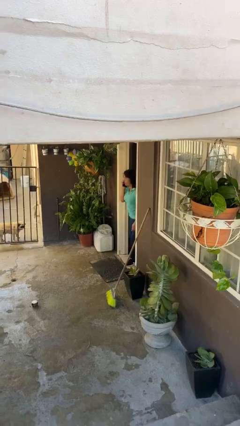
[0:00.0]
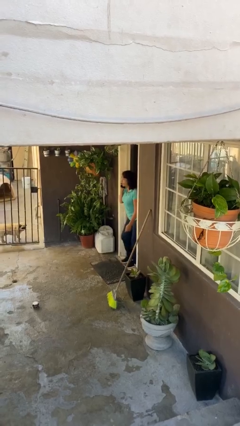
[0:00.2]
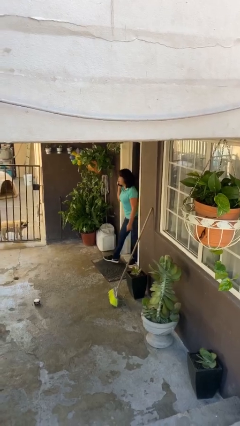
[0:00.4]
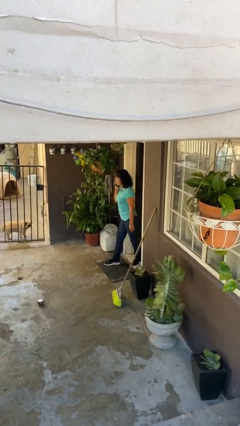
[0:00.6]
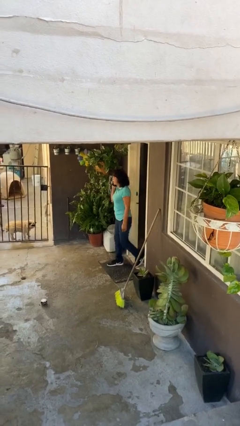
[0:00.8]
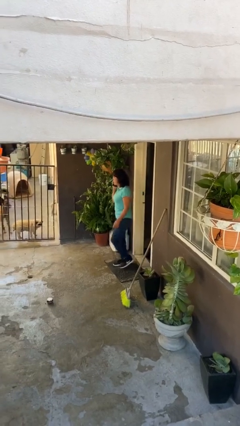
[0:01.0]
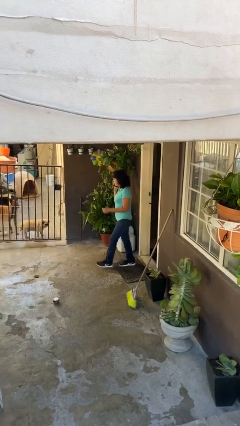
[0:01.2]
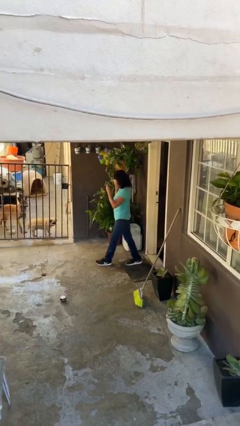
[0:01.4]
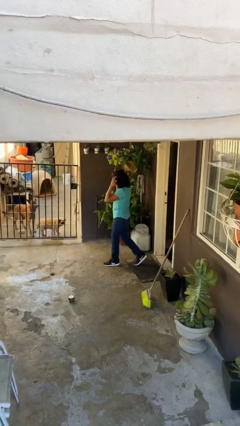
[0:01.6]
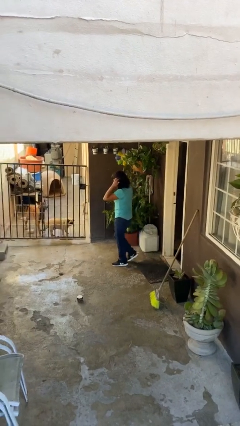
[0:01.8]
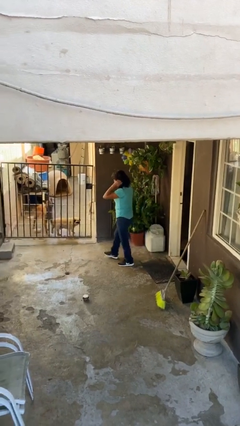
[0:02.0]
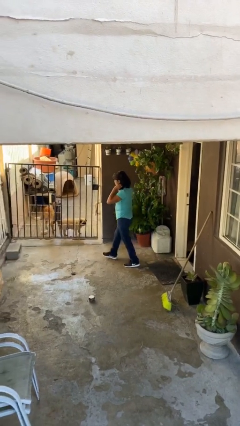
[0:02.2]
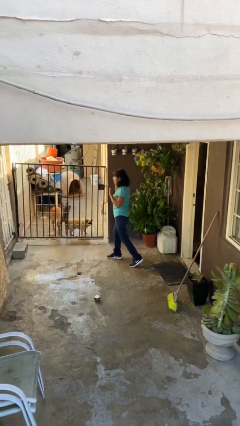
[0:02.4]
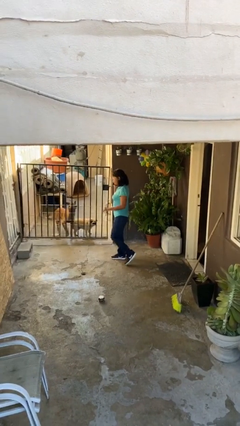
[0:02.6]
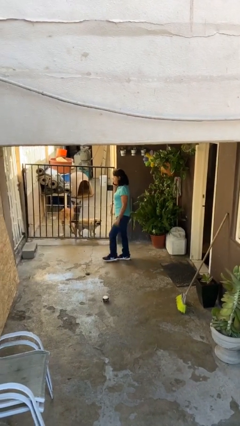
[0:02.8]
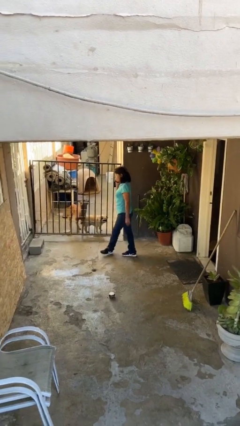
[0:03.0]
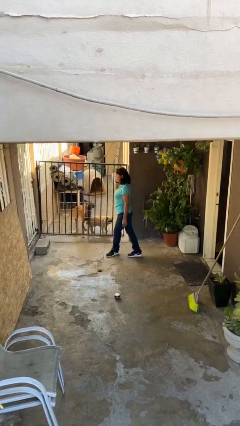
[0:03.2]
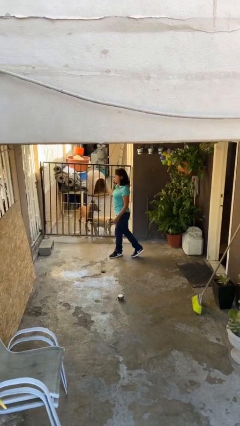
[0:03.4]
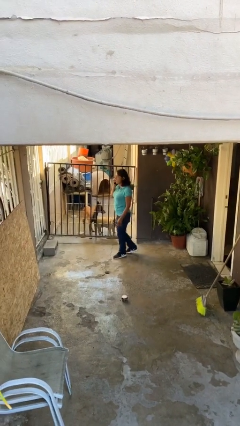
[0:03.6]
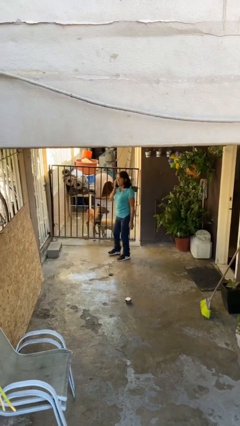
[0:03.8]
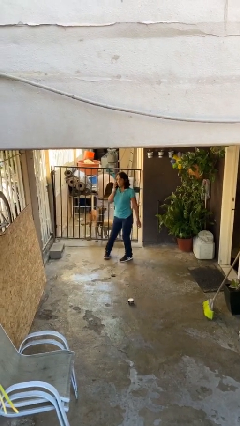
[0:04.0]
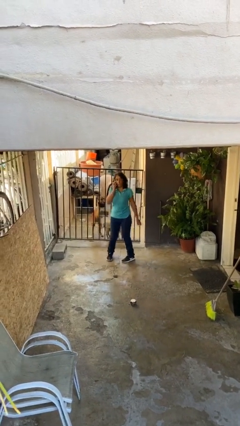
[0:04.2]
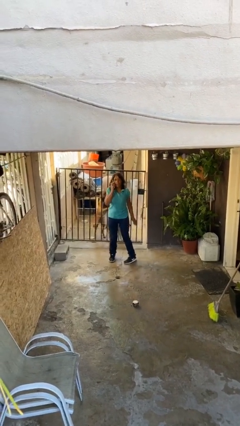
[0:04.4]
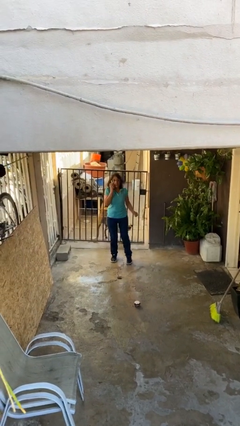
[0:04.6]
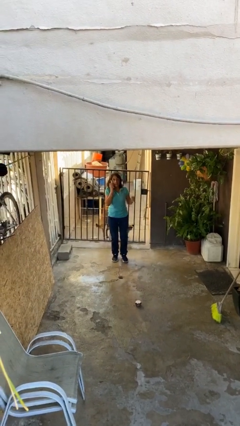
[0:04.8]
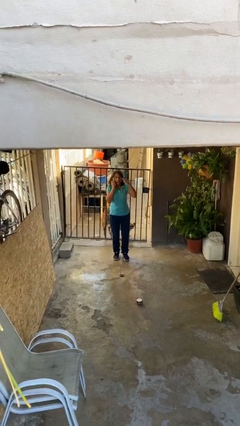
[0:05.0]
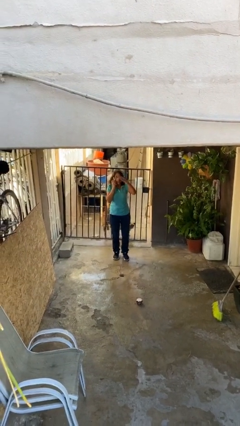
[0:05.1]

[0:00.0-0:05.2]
person enters scene through structure

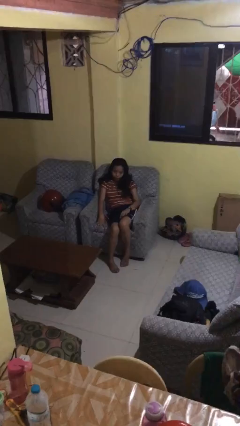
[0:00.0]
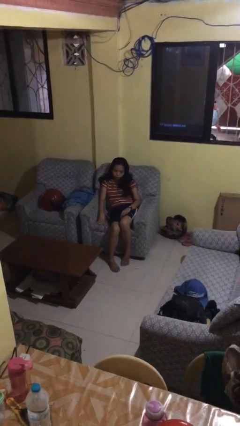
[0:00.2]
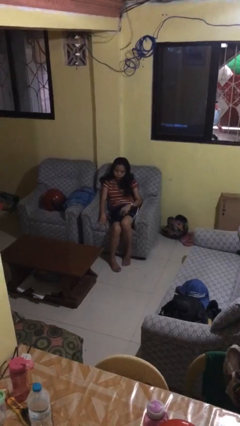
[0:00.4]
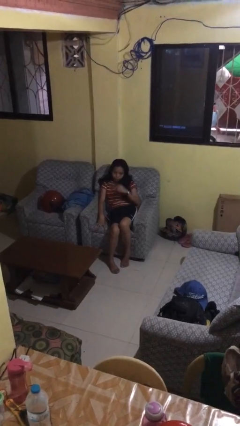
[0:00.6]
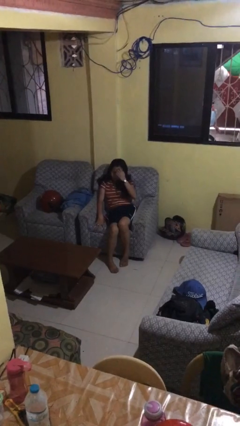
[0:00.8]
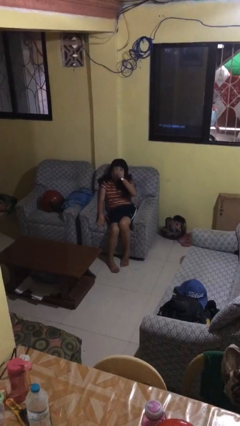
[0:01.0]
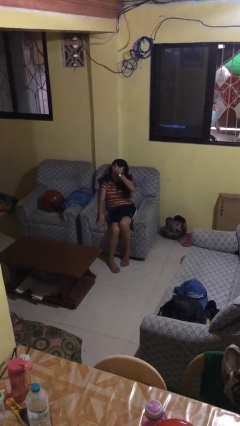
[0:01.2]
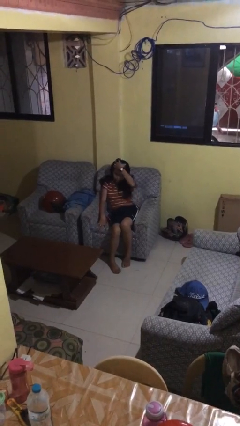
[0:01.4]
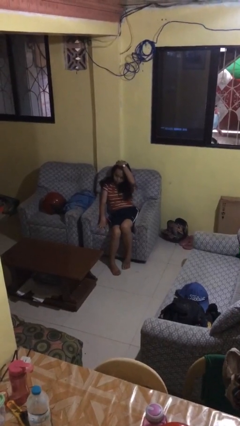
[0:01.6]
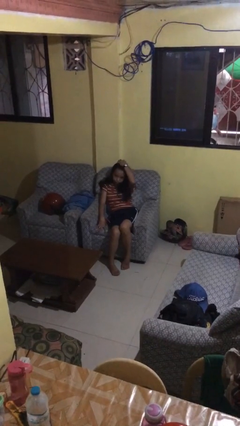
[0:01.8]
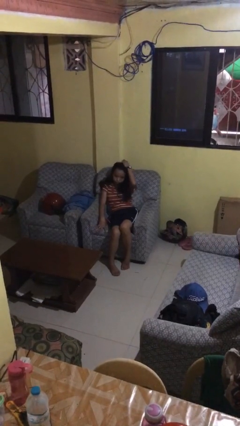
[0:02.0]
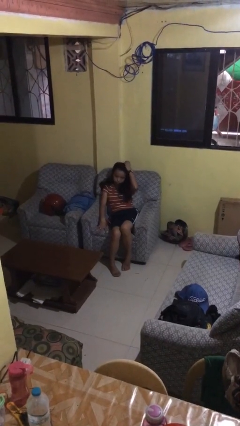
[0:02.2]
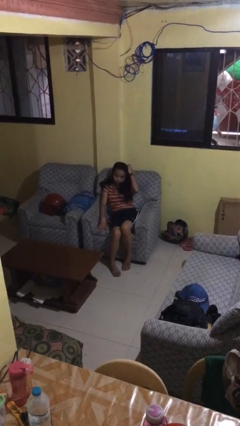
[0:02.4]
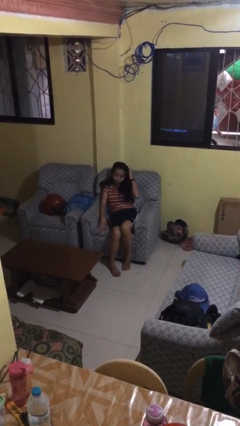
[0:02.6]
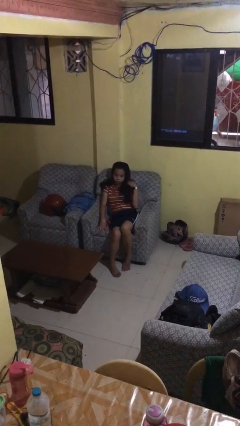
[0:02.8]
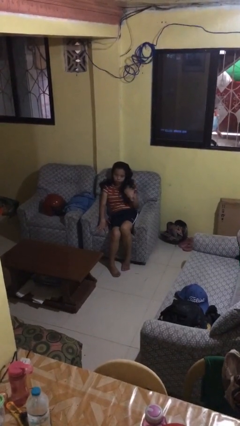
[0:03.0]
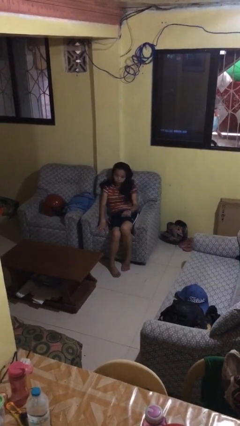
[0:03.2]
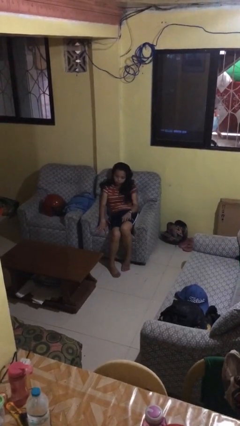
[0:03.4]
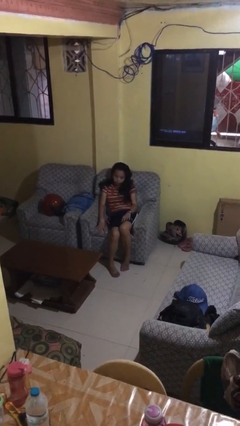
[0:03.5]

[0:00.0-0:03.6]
person strokes hair

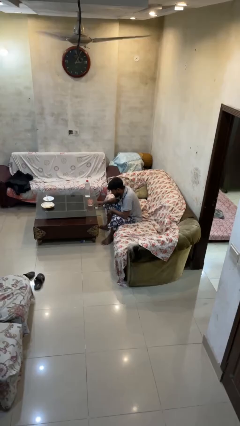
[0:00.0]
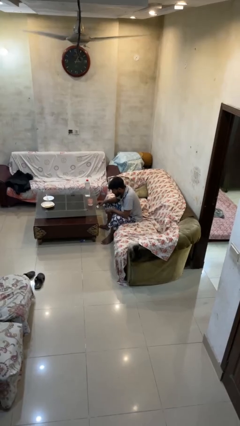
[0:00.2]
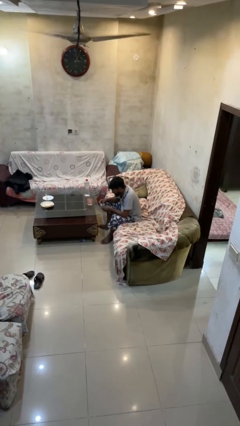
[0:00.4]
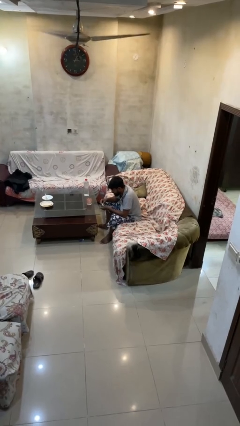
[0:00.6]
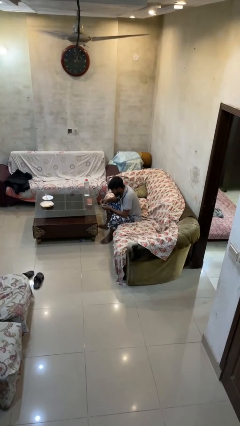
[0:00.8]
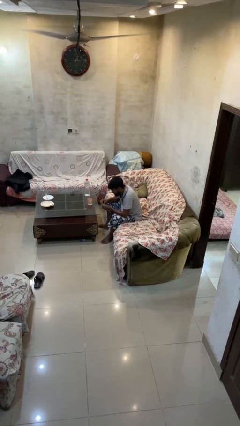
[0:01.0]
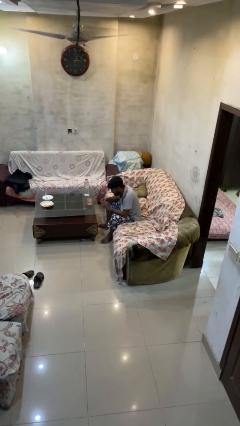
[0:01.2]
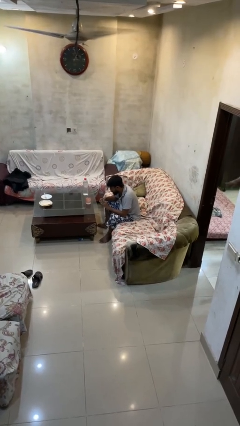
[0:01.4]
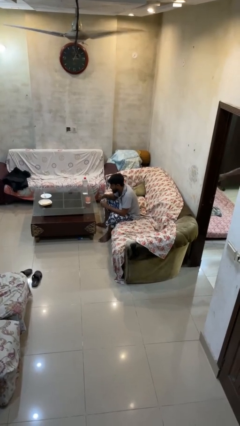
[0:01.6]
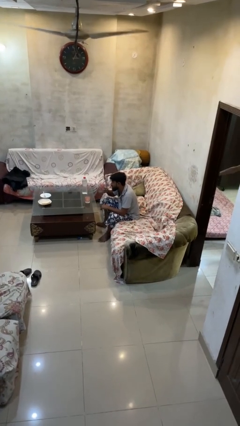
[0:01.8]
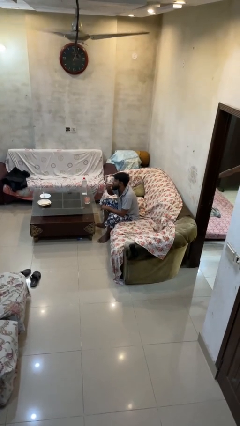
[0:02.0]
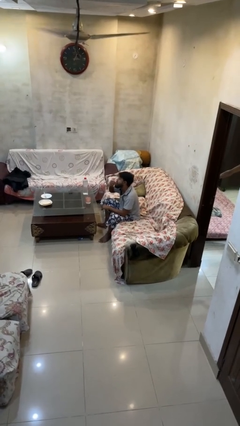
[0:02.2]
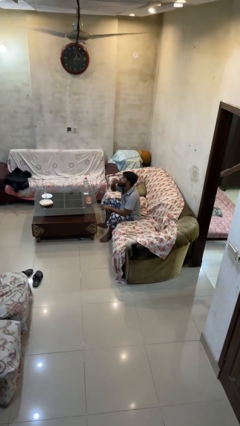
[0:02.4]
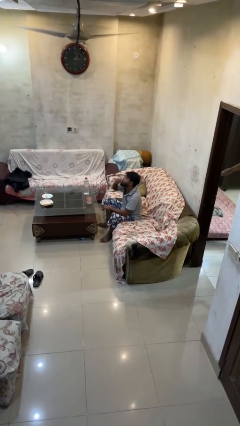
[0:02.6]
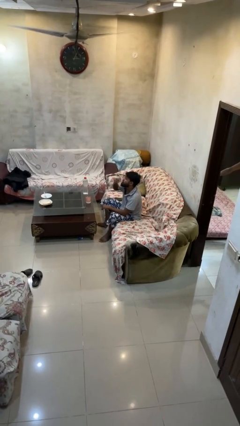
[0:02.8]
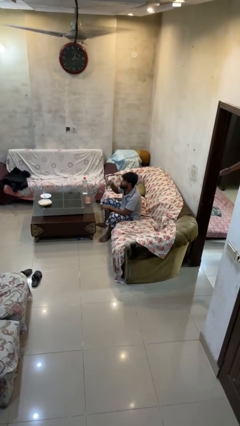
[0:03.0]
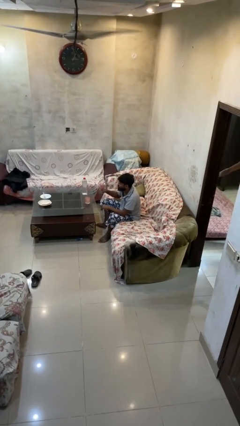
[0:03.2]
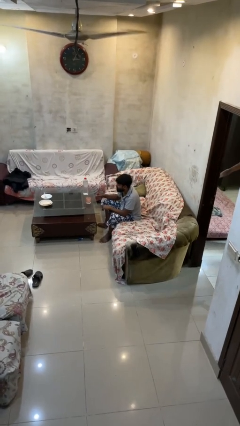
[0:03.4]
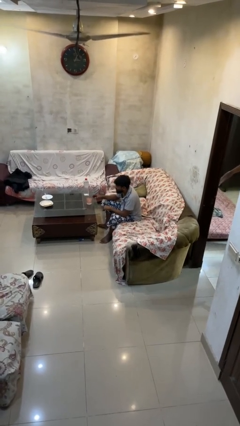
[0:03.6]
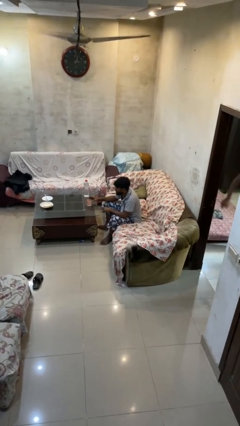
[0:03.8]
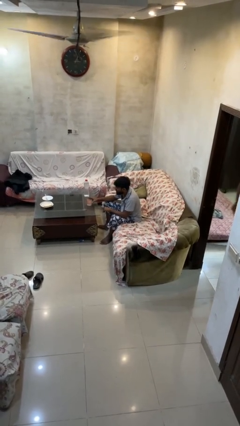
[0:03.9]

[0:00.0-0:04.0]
person takes medicine pills

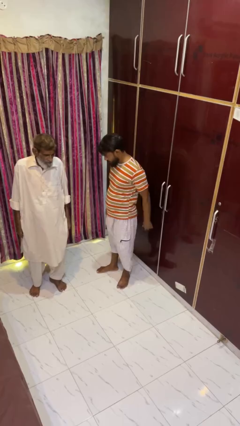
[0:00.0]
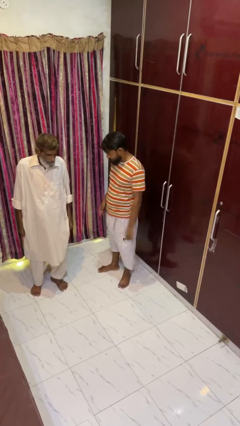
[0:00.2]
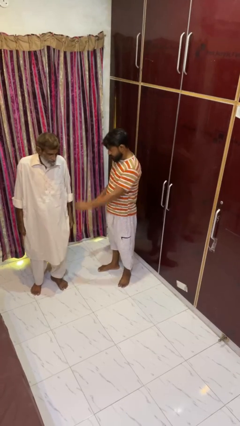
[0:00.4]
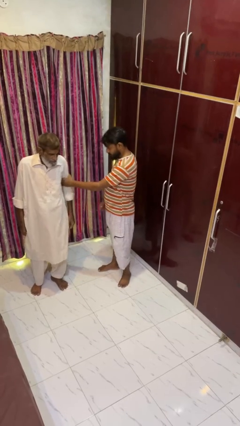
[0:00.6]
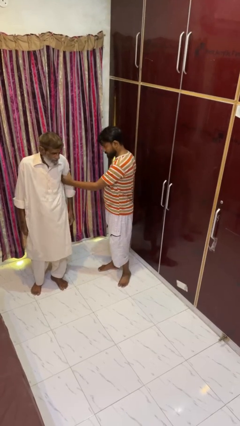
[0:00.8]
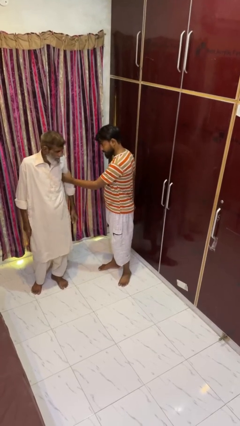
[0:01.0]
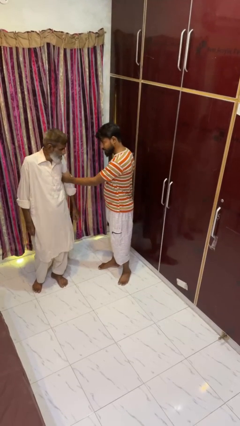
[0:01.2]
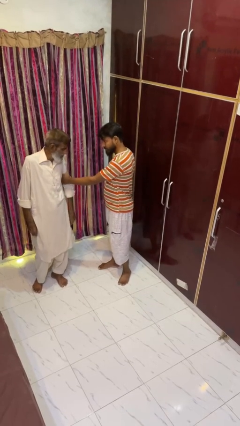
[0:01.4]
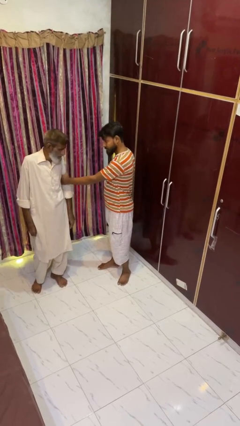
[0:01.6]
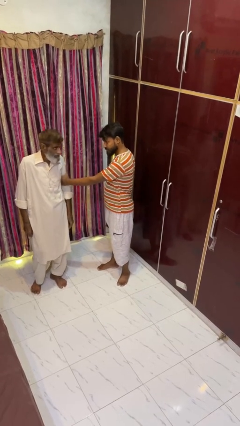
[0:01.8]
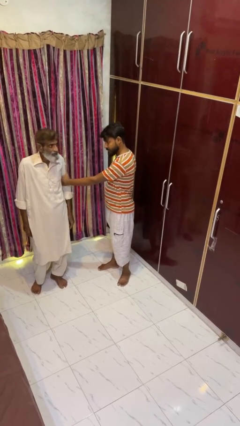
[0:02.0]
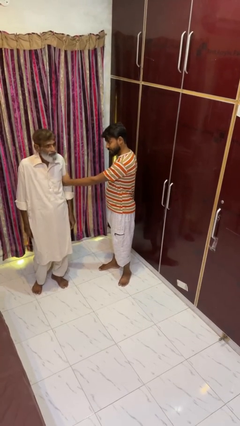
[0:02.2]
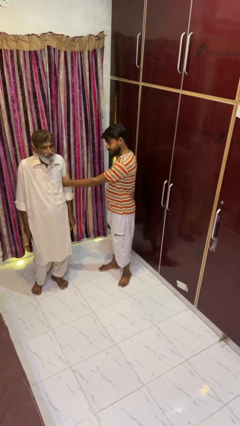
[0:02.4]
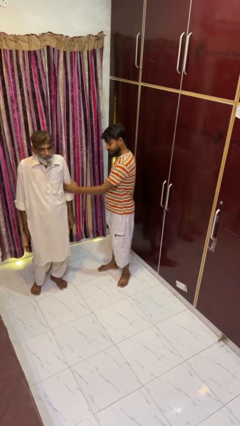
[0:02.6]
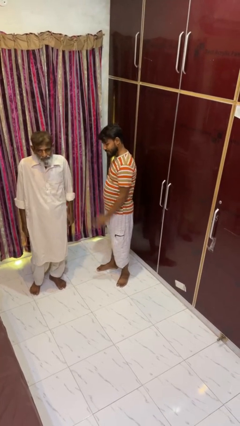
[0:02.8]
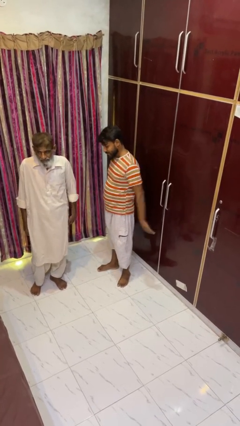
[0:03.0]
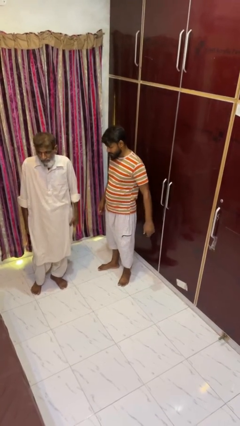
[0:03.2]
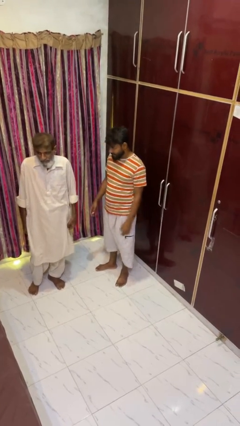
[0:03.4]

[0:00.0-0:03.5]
person grabs person by bicep

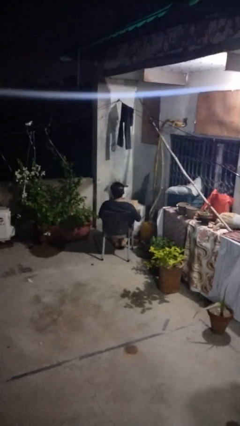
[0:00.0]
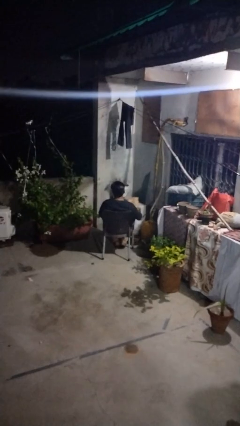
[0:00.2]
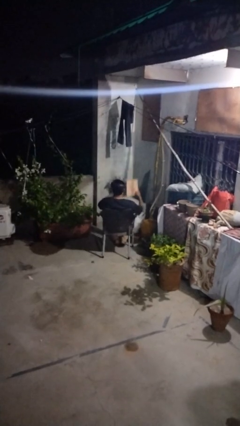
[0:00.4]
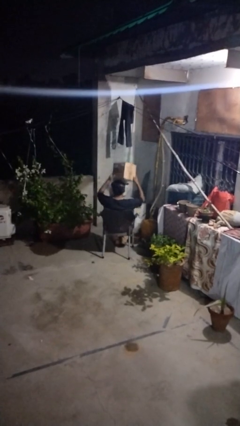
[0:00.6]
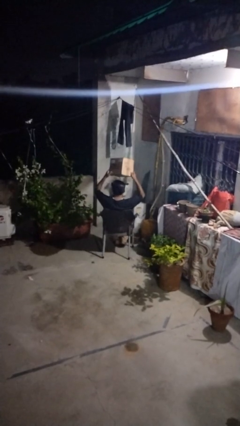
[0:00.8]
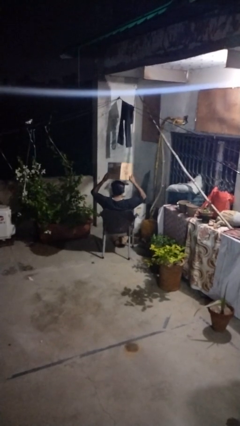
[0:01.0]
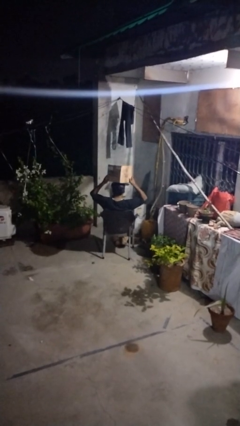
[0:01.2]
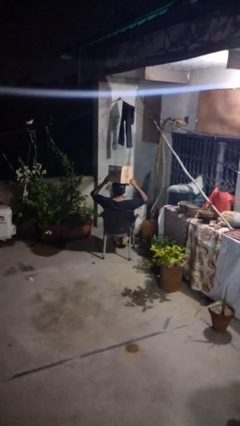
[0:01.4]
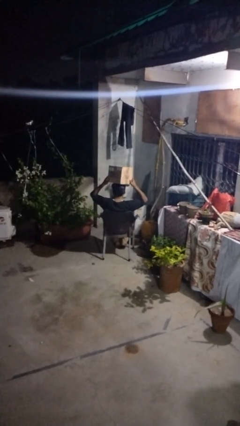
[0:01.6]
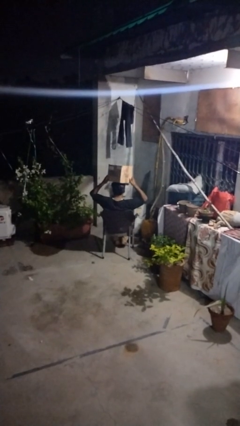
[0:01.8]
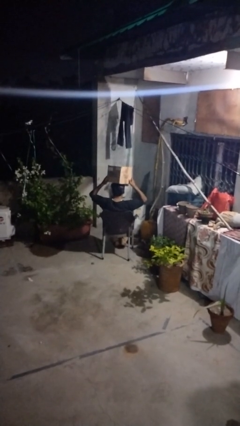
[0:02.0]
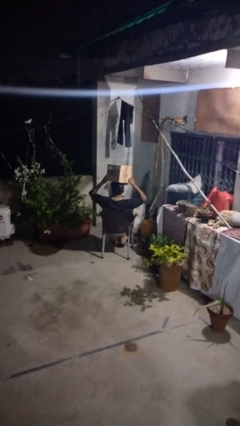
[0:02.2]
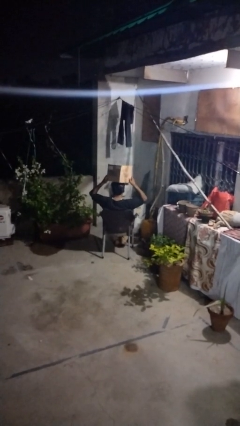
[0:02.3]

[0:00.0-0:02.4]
person holds object above head
